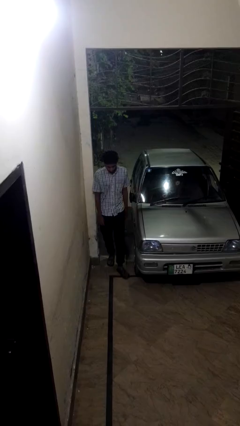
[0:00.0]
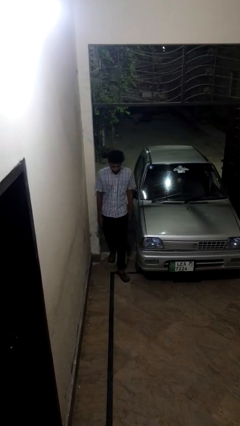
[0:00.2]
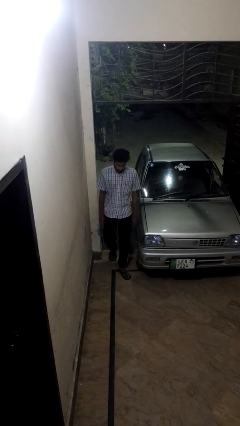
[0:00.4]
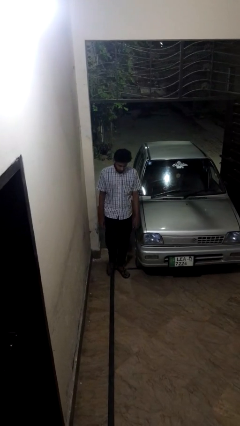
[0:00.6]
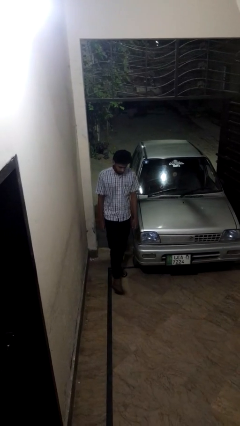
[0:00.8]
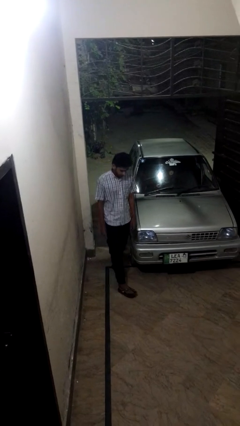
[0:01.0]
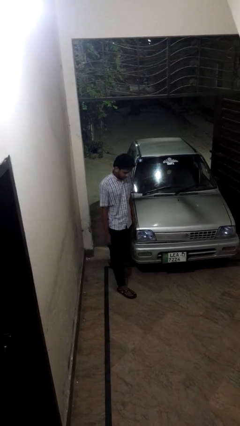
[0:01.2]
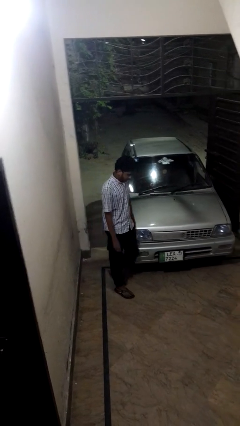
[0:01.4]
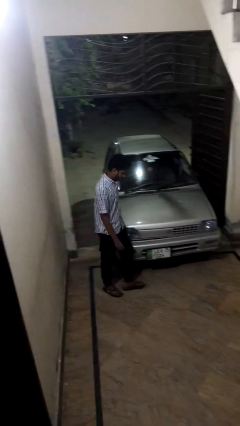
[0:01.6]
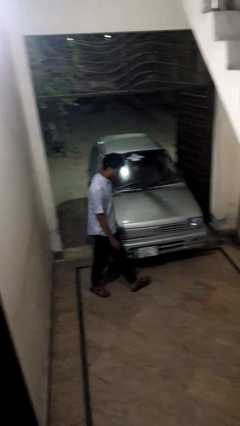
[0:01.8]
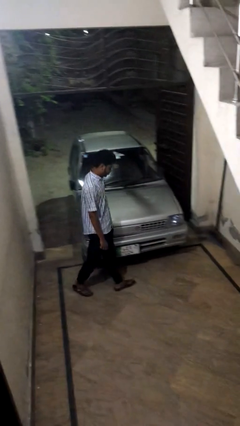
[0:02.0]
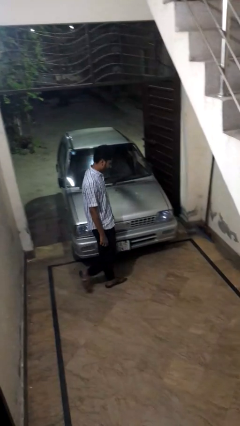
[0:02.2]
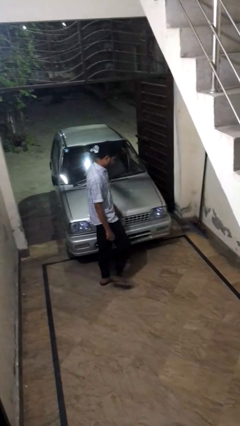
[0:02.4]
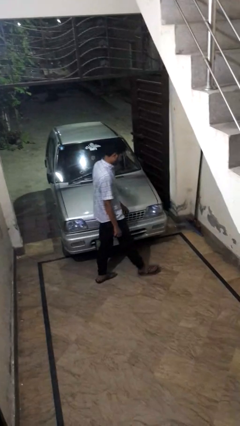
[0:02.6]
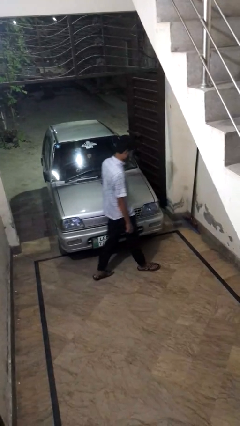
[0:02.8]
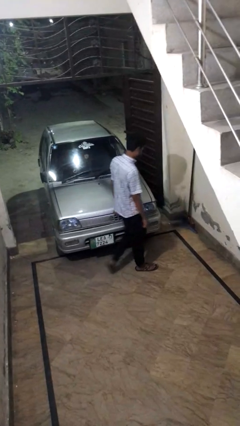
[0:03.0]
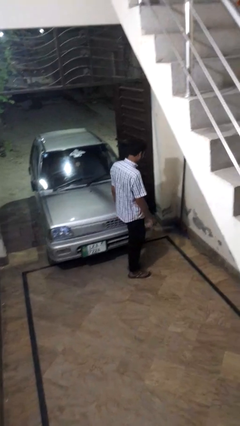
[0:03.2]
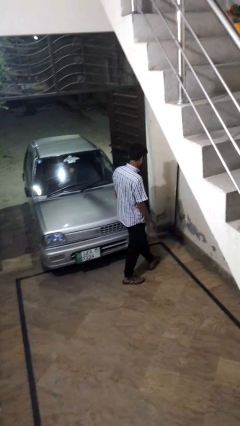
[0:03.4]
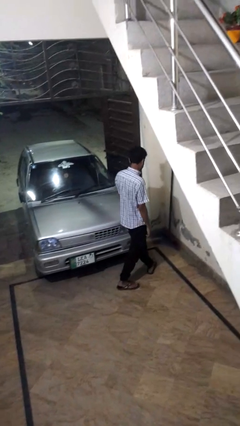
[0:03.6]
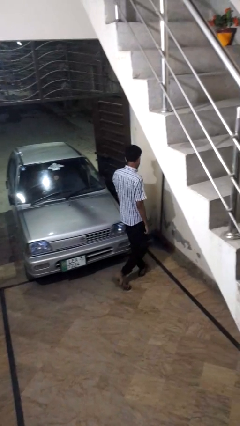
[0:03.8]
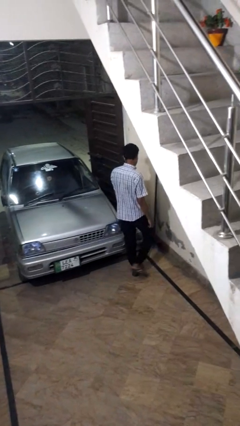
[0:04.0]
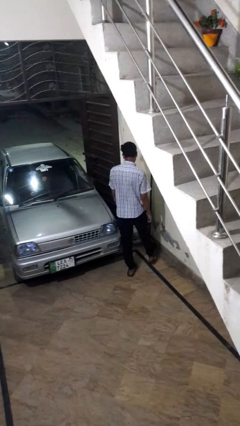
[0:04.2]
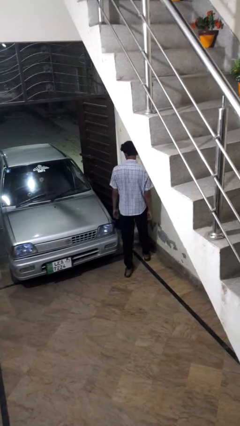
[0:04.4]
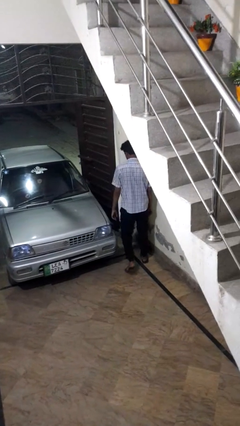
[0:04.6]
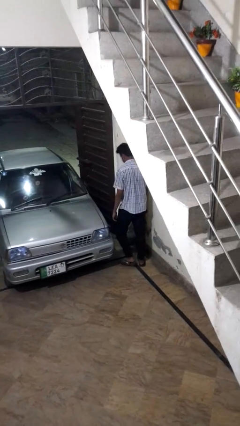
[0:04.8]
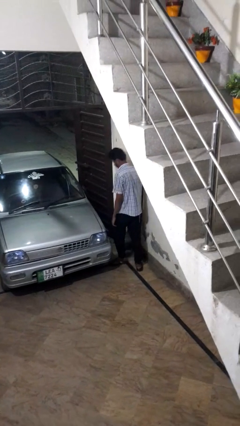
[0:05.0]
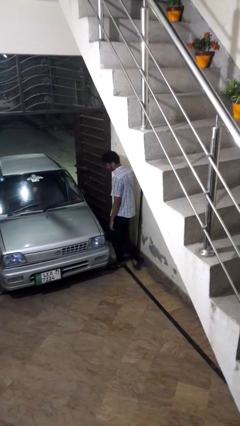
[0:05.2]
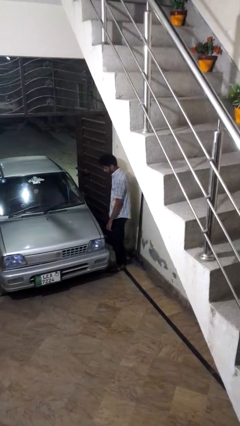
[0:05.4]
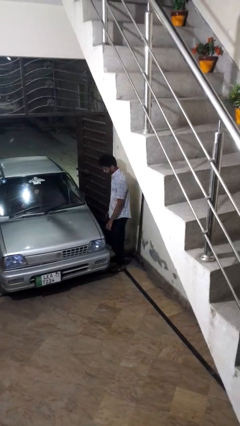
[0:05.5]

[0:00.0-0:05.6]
person walks around car

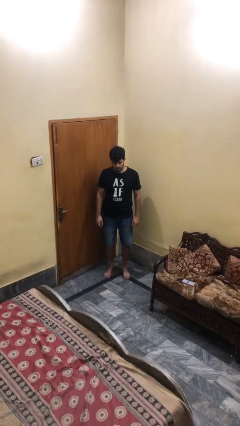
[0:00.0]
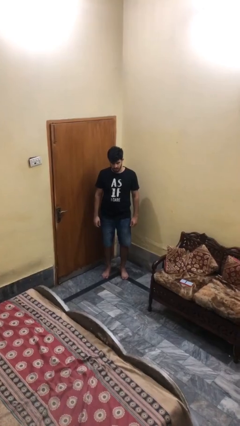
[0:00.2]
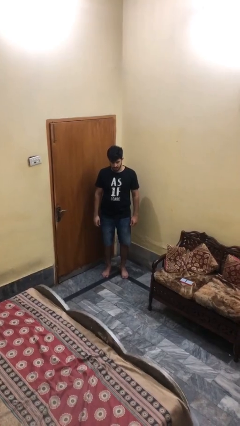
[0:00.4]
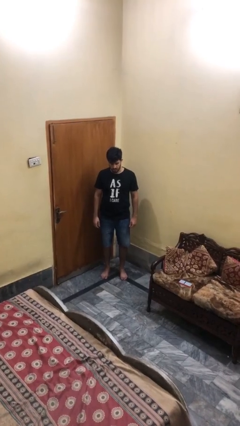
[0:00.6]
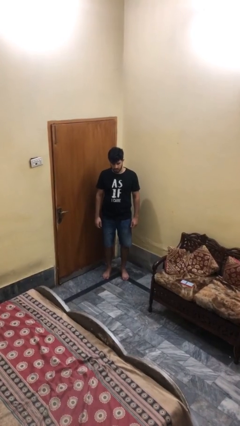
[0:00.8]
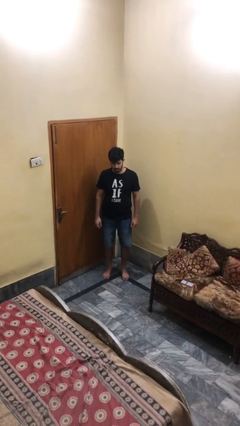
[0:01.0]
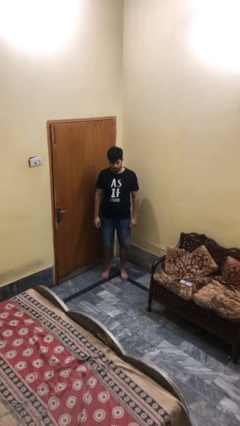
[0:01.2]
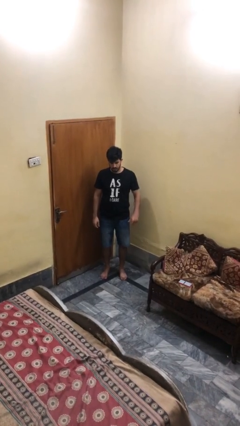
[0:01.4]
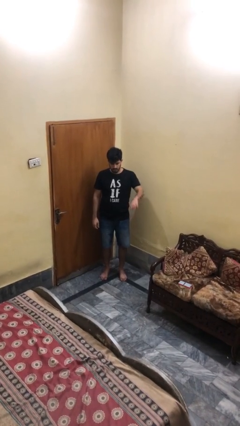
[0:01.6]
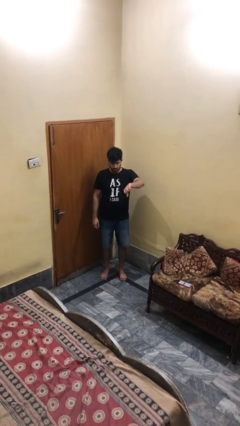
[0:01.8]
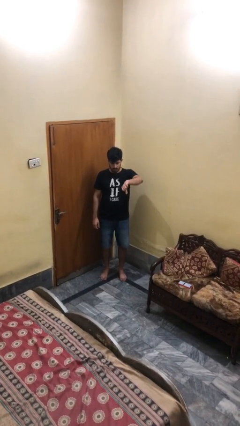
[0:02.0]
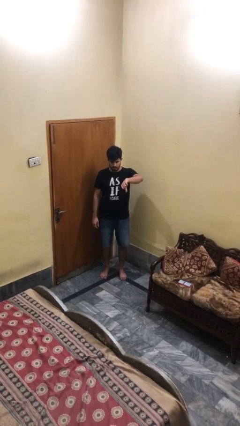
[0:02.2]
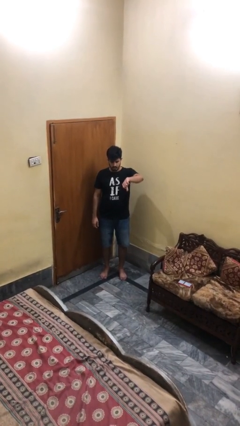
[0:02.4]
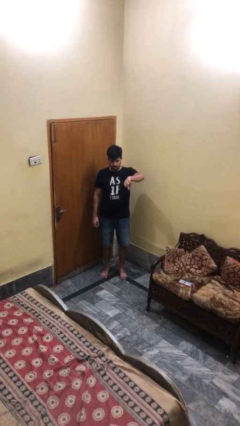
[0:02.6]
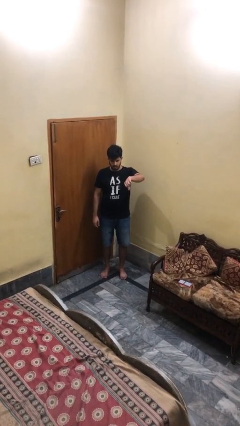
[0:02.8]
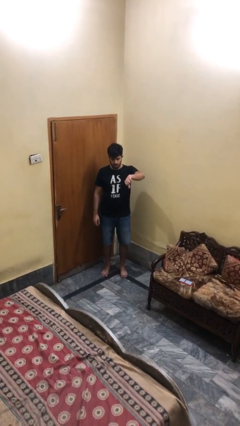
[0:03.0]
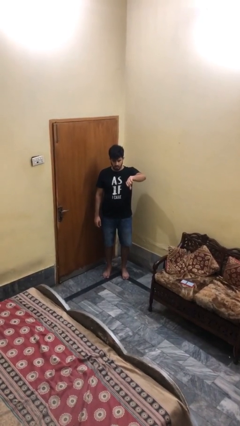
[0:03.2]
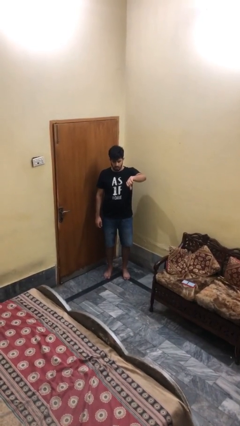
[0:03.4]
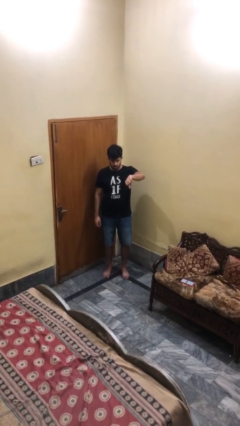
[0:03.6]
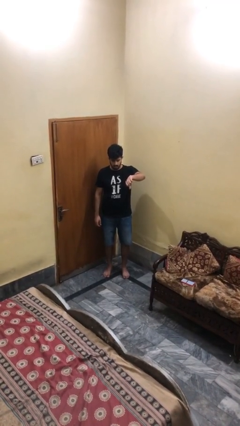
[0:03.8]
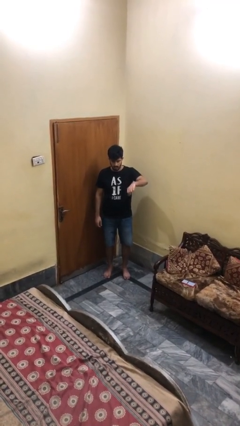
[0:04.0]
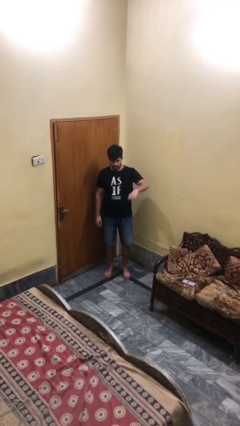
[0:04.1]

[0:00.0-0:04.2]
person gestures thumbs down

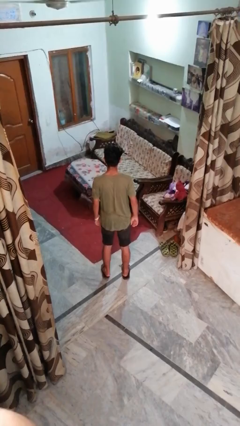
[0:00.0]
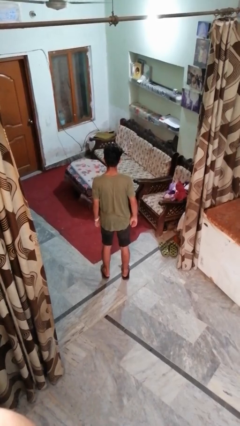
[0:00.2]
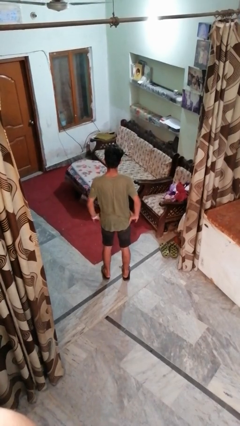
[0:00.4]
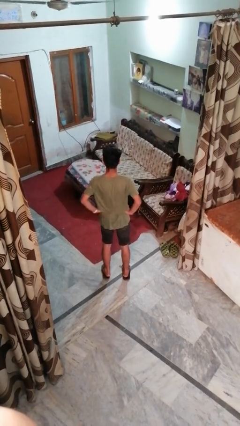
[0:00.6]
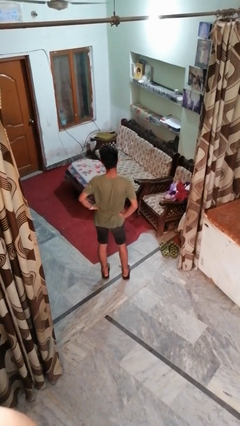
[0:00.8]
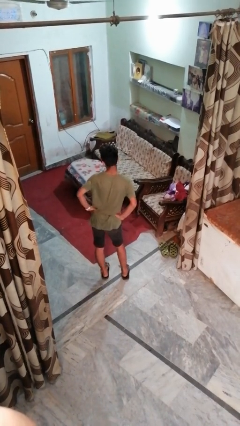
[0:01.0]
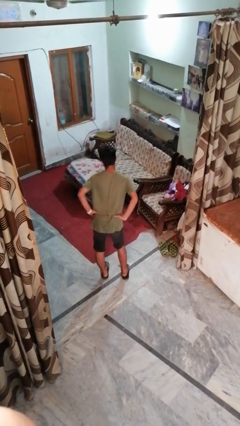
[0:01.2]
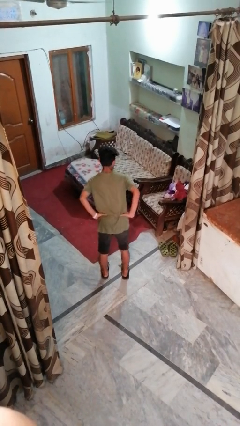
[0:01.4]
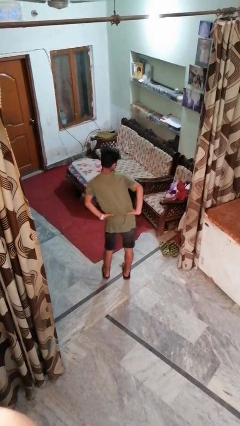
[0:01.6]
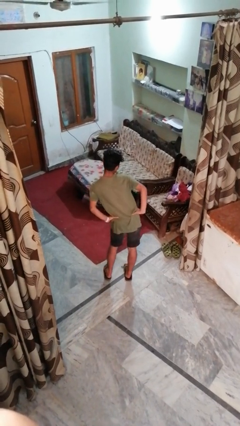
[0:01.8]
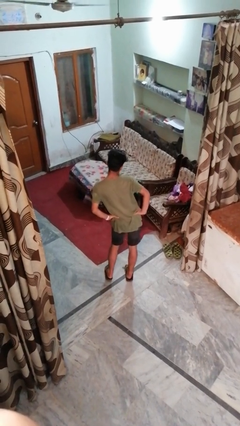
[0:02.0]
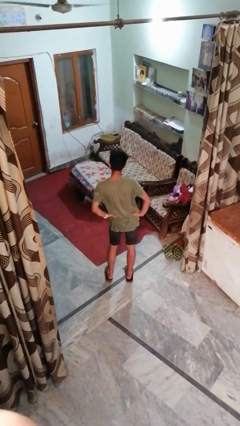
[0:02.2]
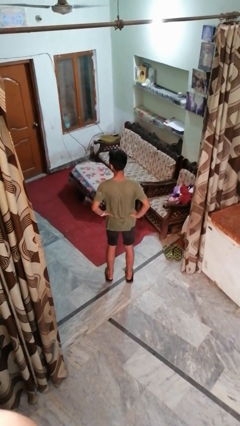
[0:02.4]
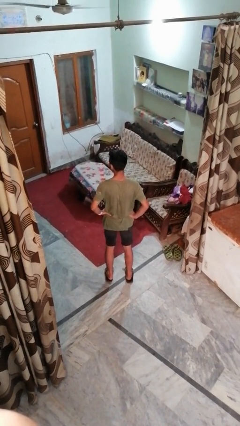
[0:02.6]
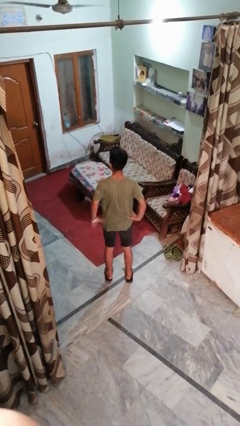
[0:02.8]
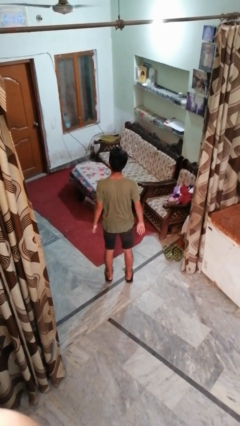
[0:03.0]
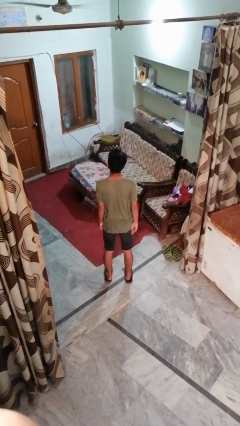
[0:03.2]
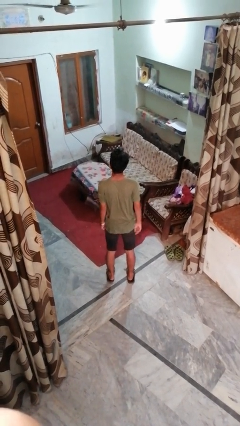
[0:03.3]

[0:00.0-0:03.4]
person wiggles hips

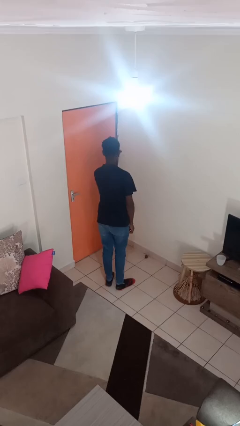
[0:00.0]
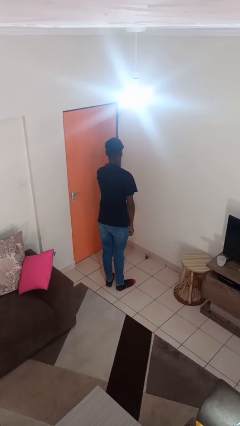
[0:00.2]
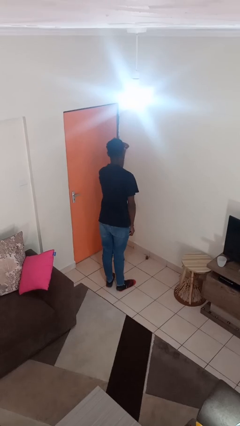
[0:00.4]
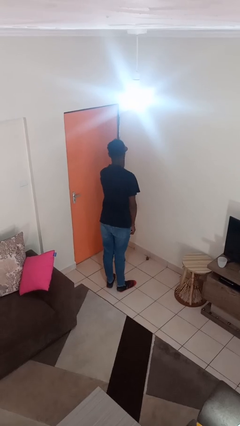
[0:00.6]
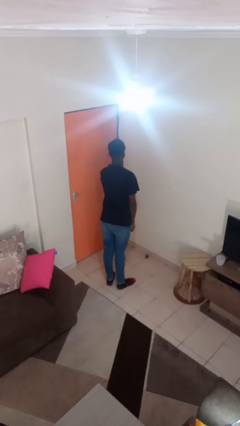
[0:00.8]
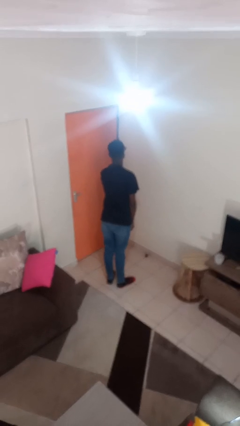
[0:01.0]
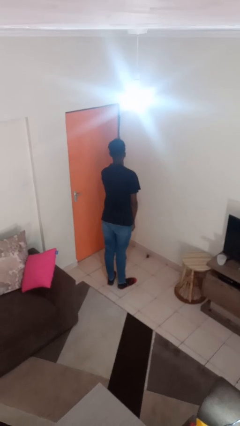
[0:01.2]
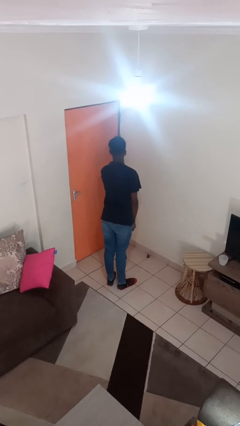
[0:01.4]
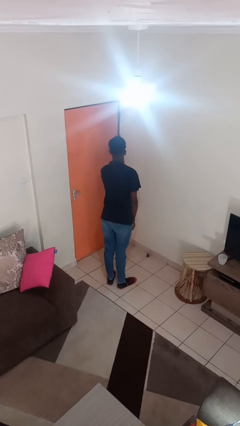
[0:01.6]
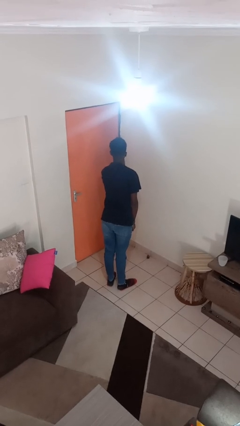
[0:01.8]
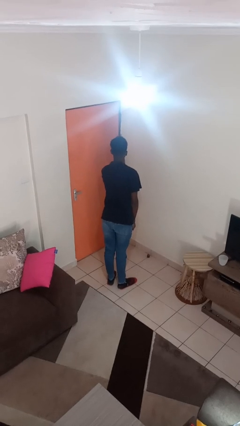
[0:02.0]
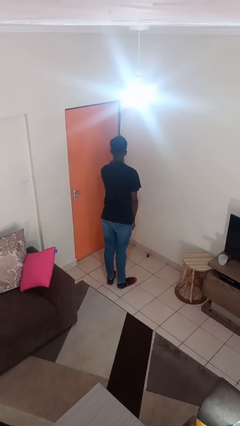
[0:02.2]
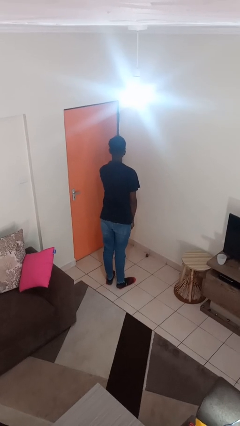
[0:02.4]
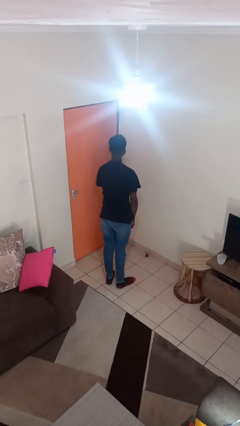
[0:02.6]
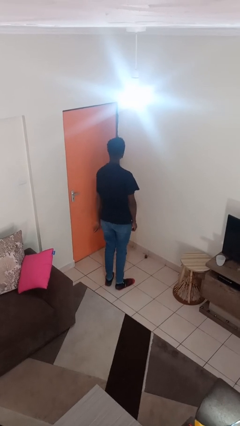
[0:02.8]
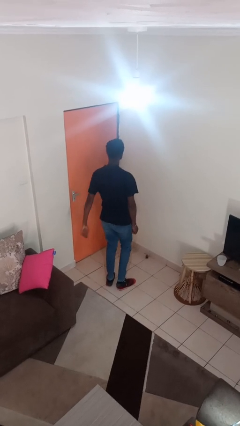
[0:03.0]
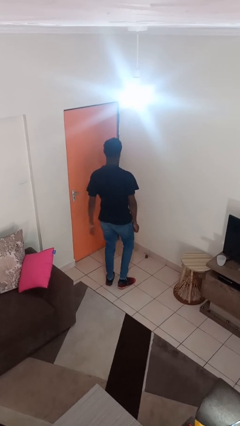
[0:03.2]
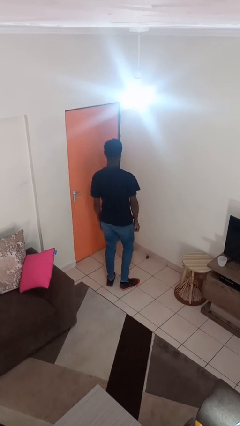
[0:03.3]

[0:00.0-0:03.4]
person gestures watch closely

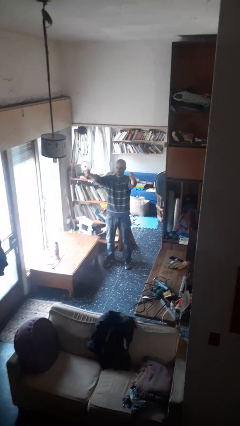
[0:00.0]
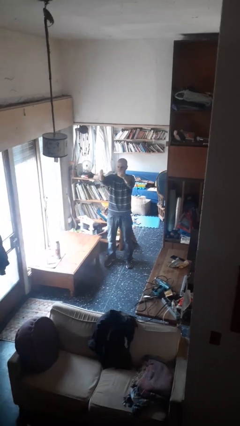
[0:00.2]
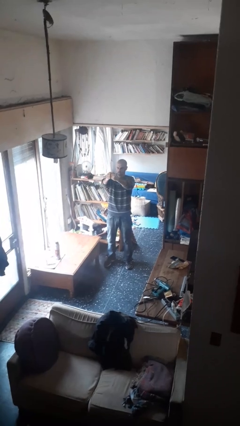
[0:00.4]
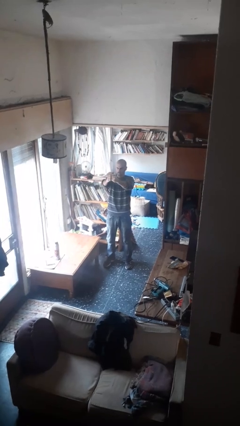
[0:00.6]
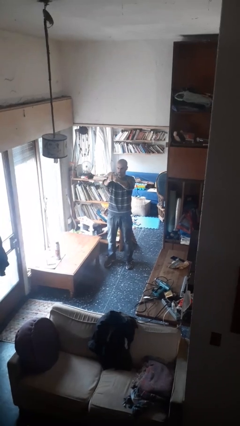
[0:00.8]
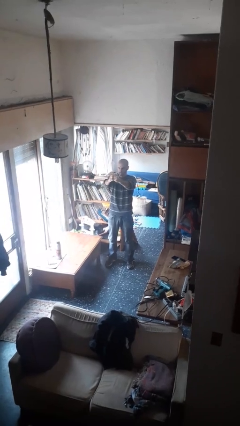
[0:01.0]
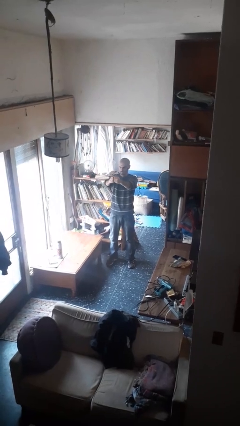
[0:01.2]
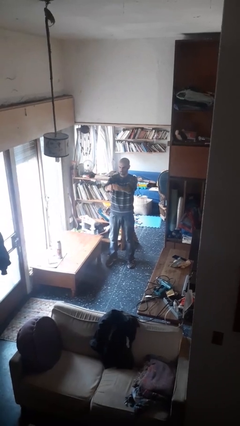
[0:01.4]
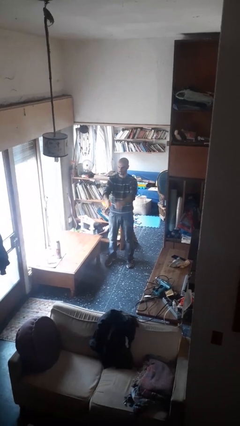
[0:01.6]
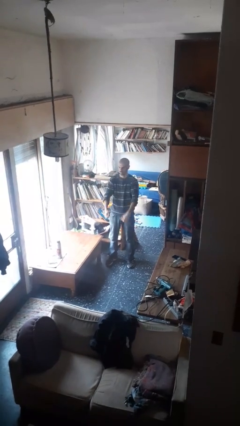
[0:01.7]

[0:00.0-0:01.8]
person gestures zoom out
